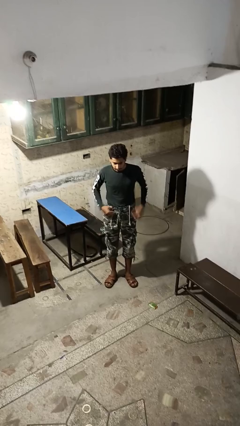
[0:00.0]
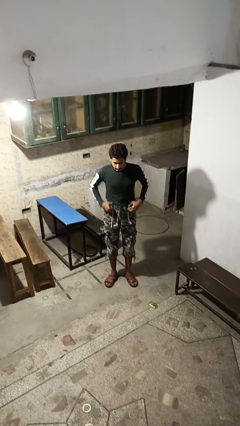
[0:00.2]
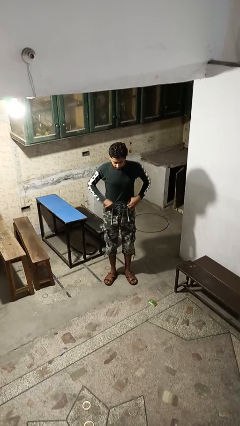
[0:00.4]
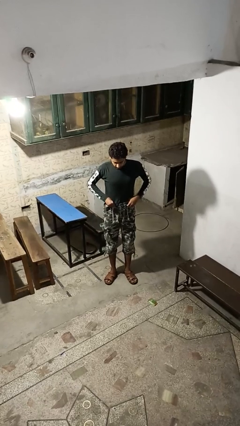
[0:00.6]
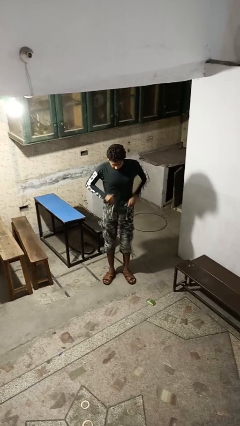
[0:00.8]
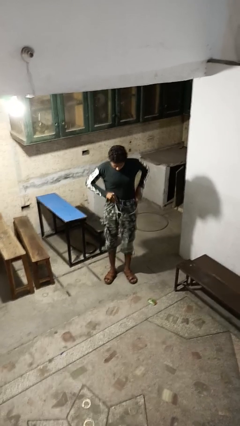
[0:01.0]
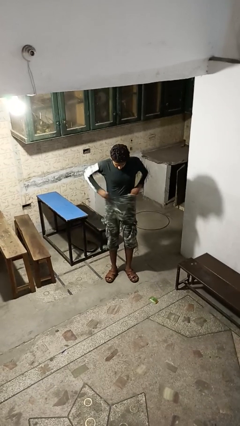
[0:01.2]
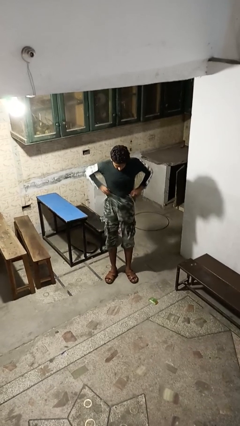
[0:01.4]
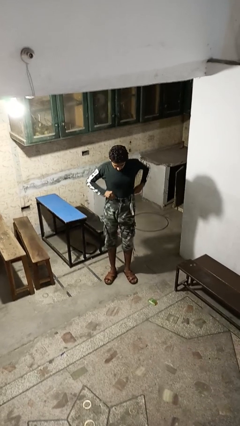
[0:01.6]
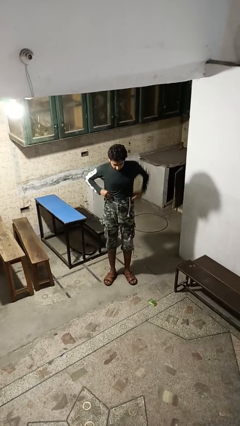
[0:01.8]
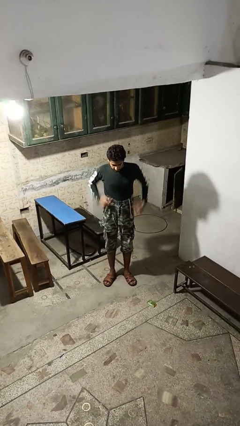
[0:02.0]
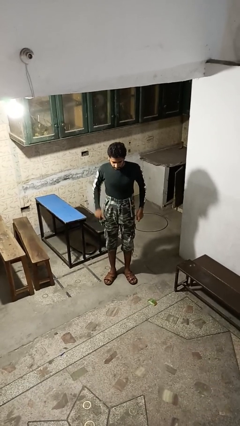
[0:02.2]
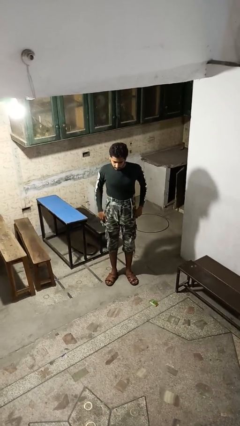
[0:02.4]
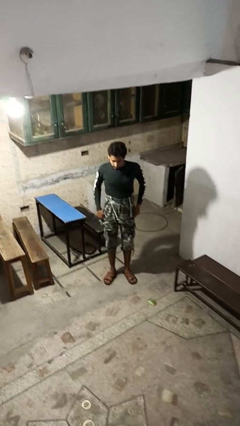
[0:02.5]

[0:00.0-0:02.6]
person hikes up pants

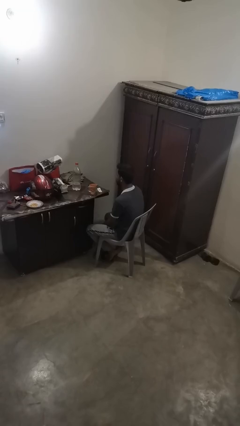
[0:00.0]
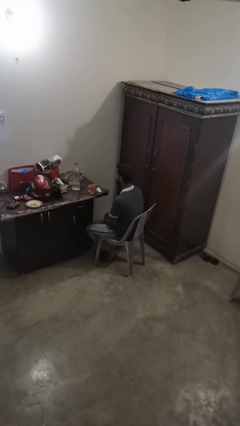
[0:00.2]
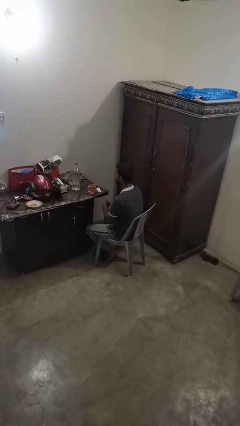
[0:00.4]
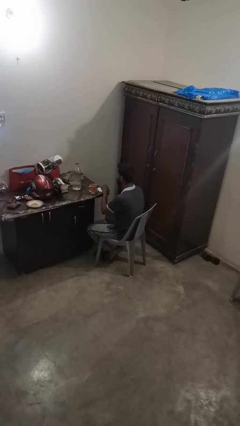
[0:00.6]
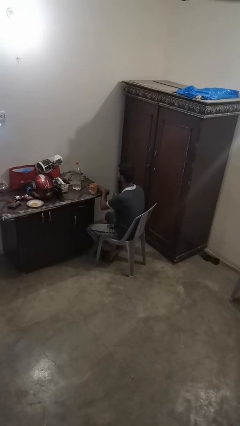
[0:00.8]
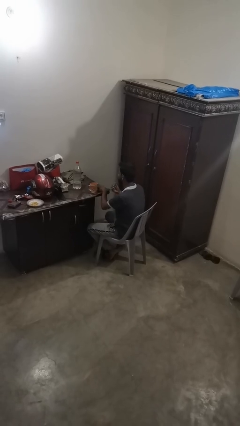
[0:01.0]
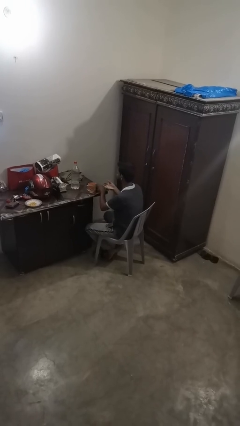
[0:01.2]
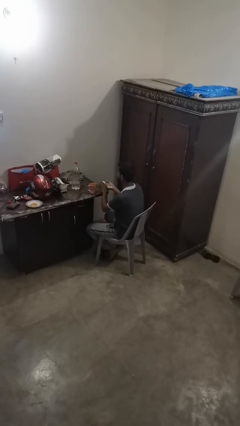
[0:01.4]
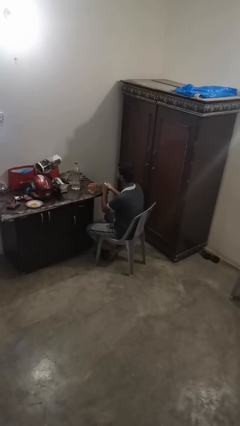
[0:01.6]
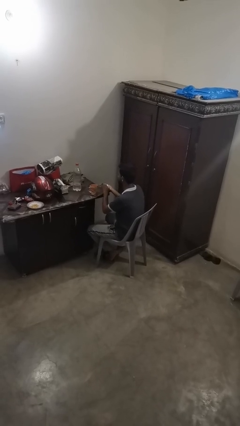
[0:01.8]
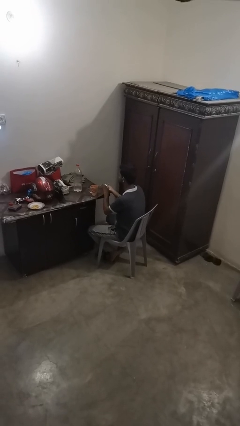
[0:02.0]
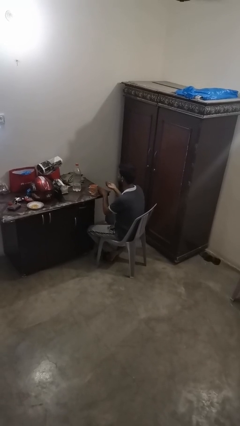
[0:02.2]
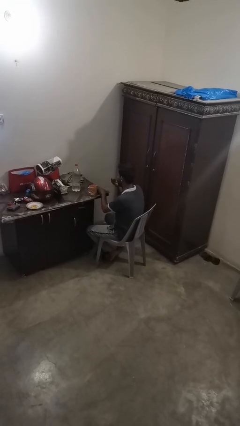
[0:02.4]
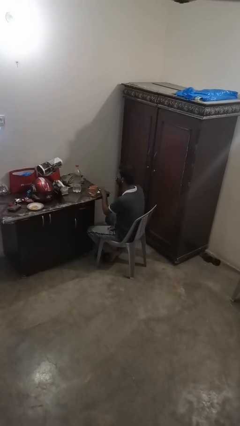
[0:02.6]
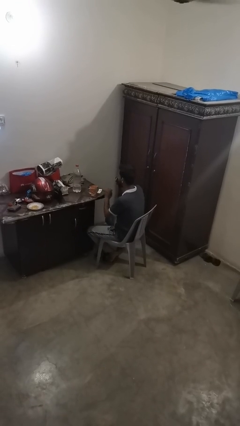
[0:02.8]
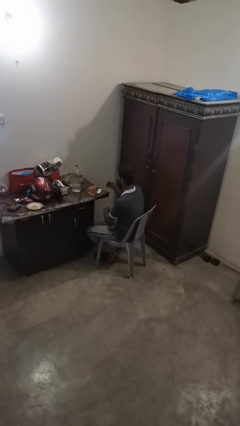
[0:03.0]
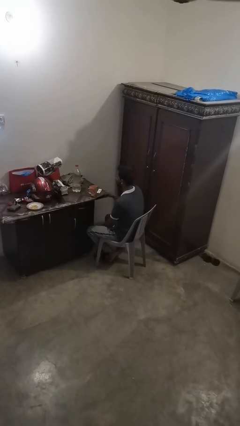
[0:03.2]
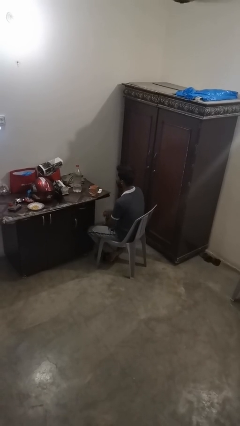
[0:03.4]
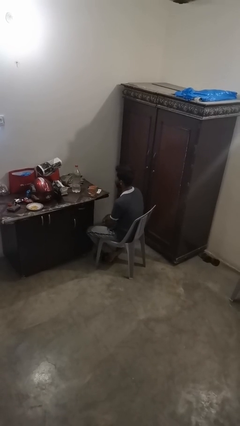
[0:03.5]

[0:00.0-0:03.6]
person takes medicine pills

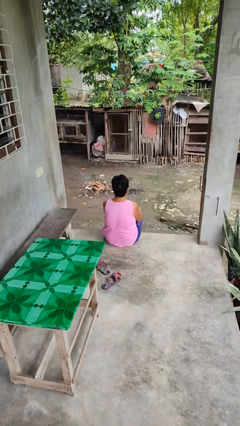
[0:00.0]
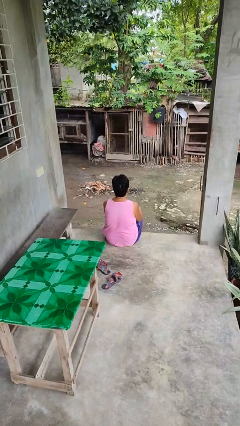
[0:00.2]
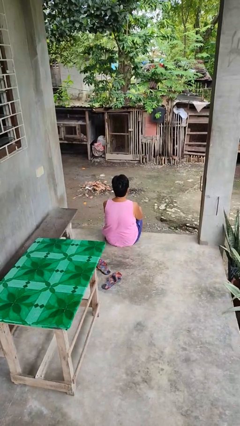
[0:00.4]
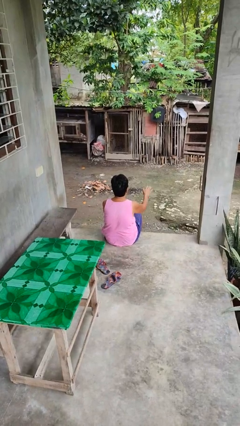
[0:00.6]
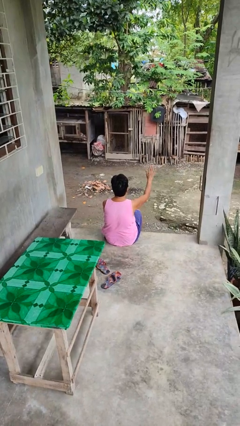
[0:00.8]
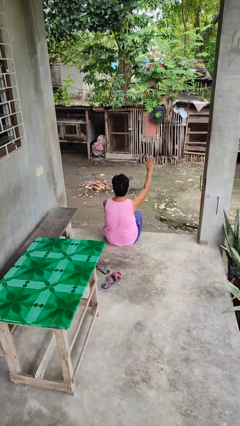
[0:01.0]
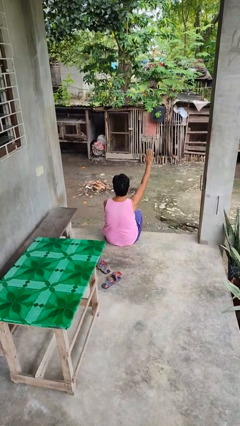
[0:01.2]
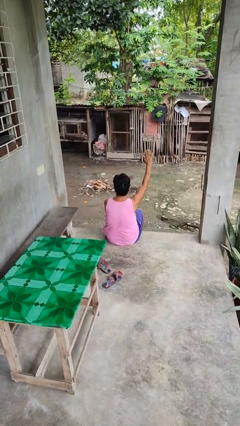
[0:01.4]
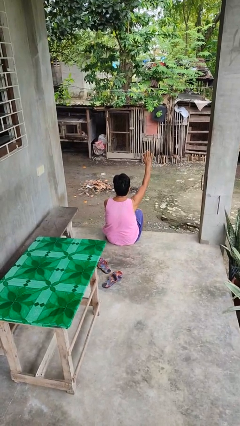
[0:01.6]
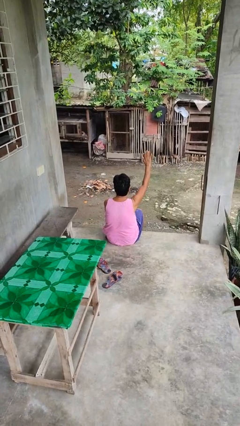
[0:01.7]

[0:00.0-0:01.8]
person gestures raise hand

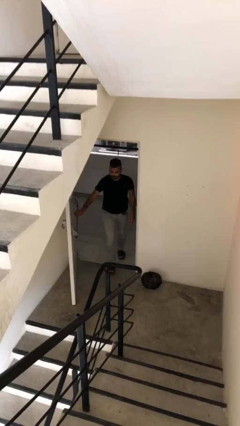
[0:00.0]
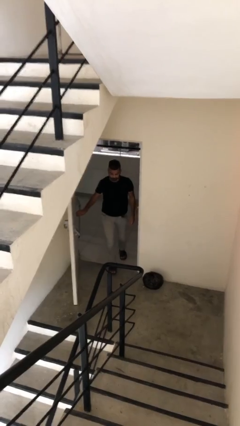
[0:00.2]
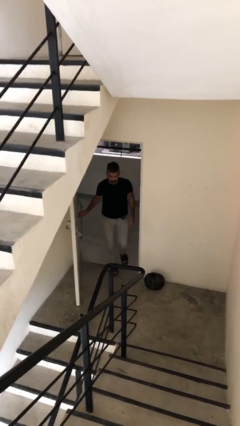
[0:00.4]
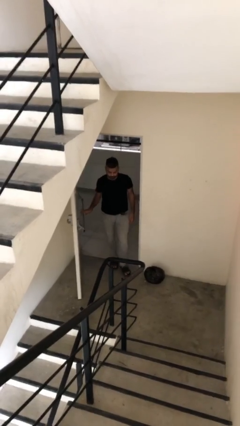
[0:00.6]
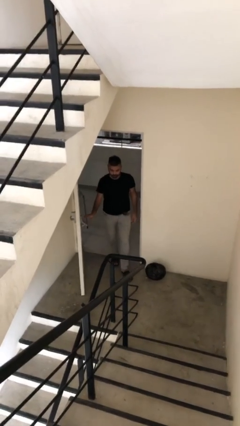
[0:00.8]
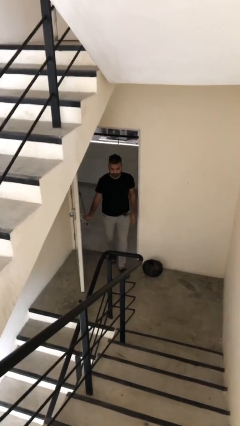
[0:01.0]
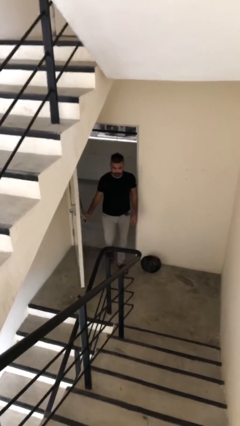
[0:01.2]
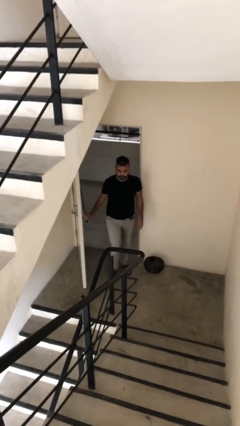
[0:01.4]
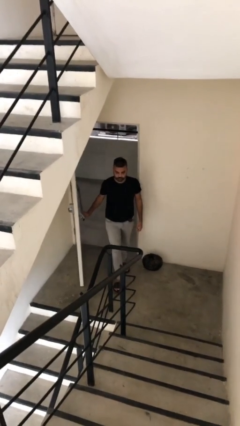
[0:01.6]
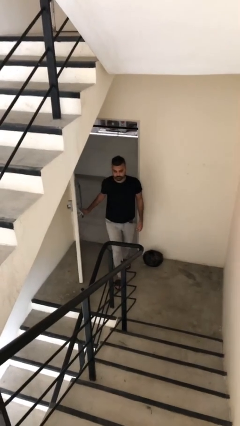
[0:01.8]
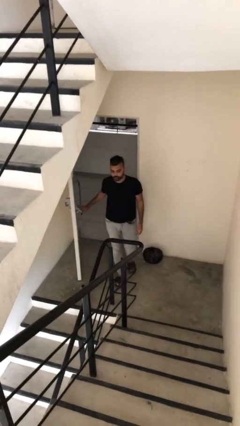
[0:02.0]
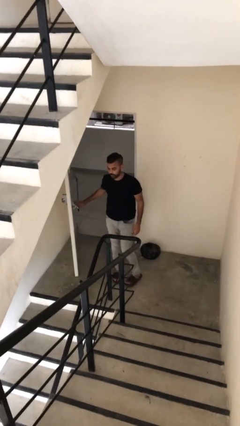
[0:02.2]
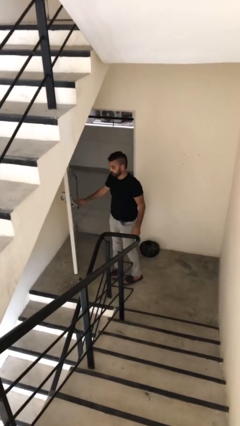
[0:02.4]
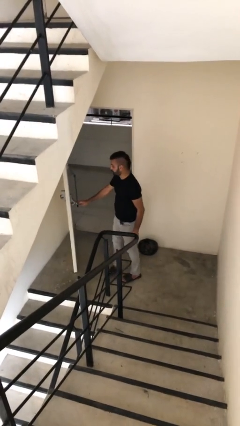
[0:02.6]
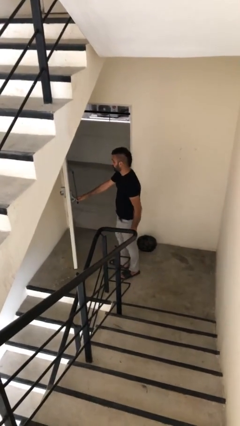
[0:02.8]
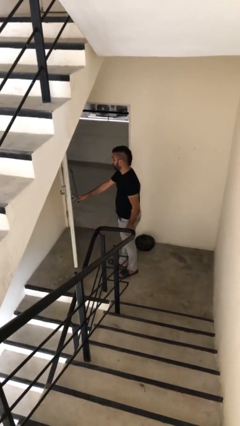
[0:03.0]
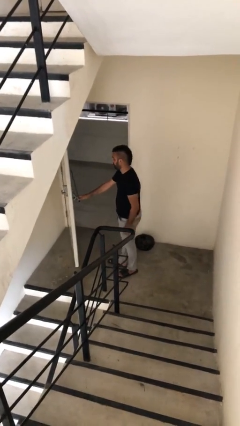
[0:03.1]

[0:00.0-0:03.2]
person enters scene through structure

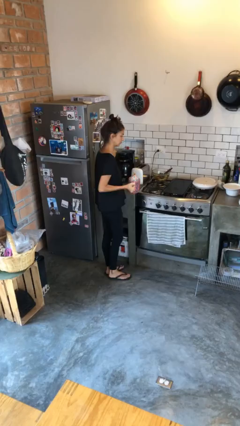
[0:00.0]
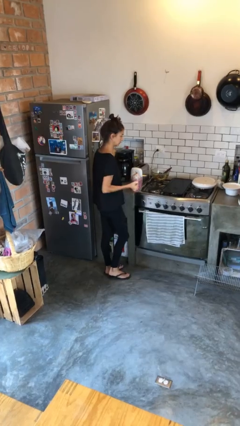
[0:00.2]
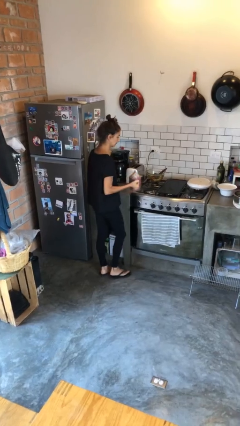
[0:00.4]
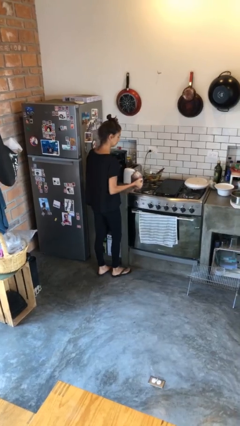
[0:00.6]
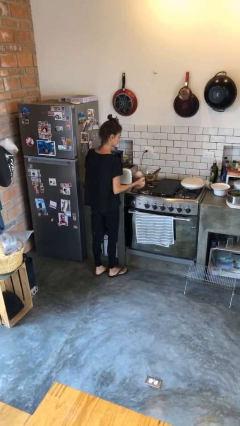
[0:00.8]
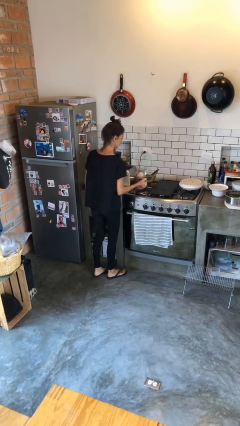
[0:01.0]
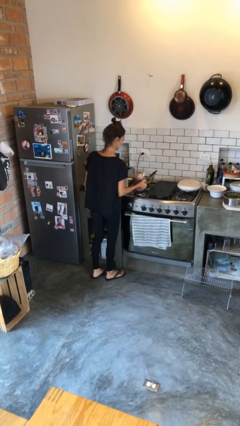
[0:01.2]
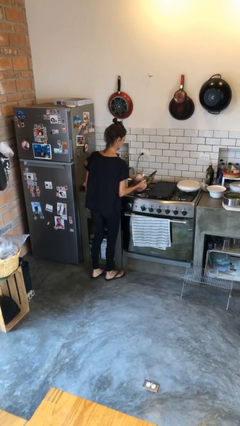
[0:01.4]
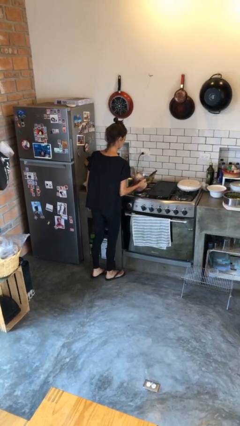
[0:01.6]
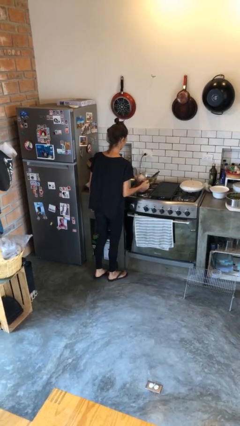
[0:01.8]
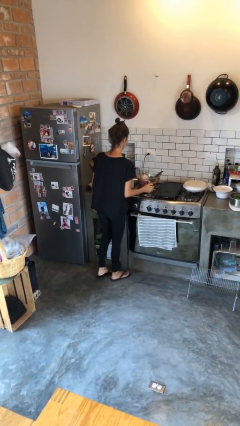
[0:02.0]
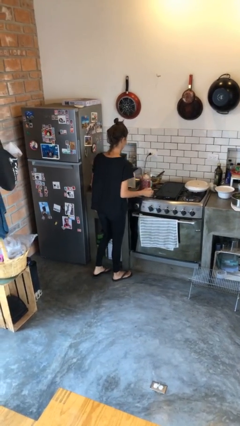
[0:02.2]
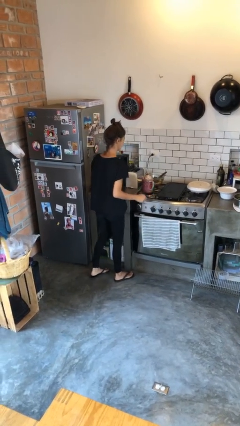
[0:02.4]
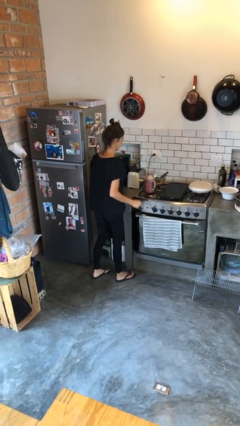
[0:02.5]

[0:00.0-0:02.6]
person puts down object on countertop

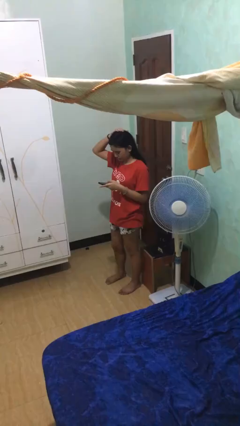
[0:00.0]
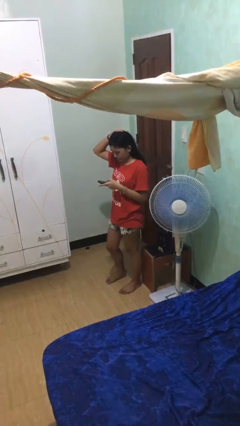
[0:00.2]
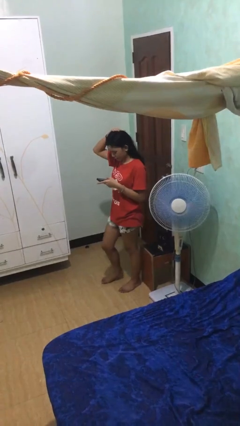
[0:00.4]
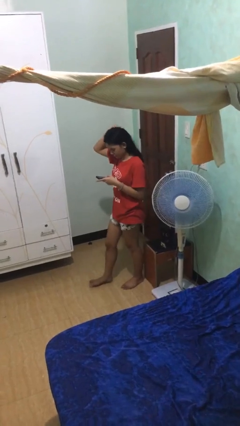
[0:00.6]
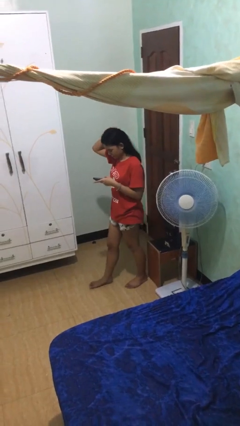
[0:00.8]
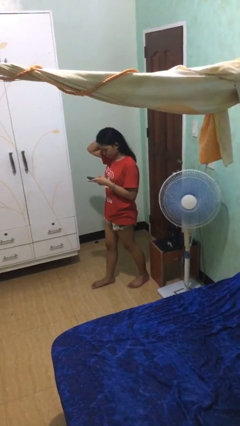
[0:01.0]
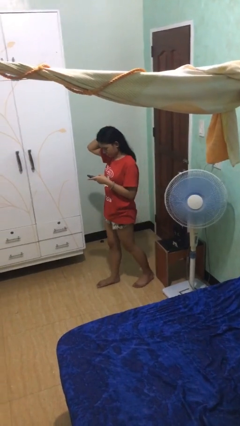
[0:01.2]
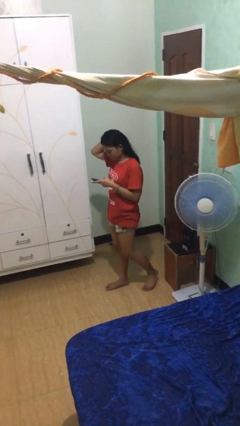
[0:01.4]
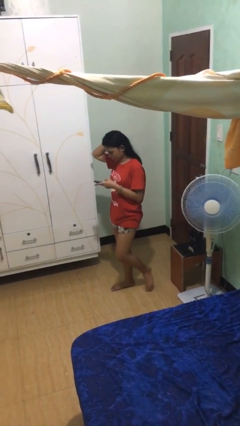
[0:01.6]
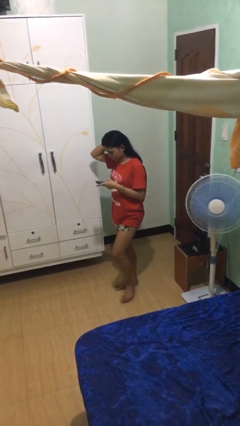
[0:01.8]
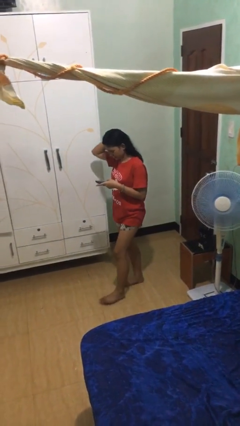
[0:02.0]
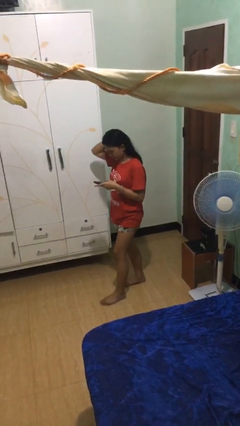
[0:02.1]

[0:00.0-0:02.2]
person texts on phone

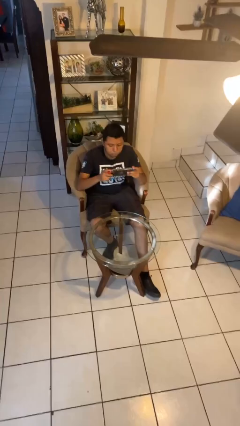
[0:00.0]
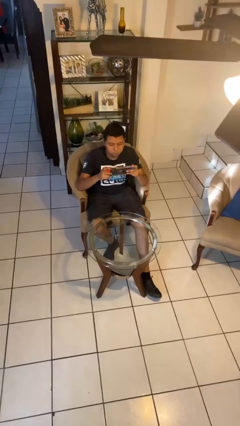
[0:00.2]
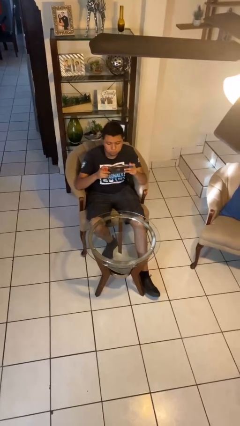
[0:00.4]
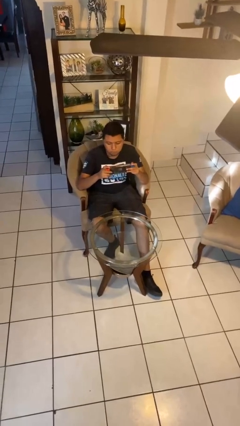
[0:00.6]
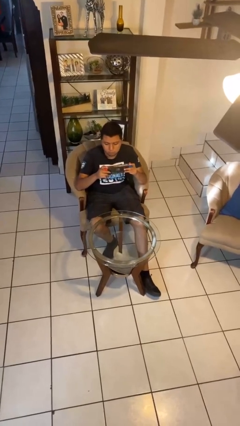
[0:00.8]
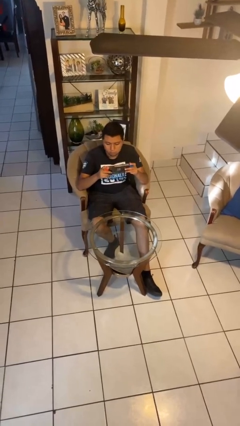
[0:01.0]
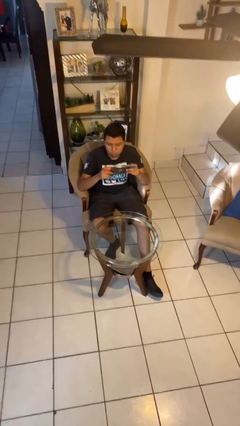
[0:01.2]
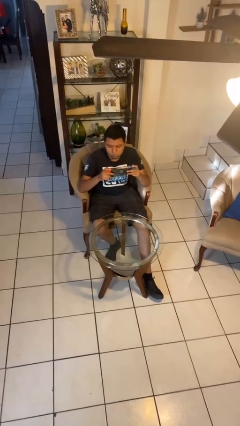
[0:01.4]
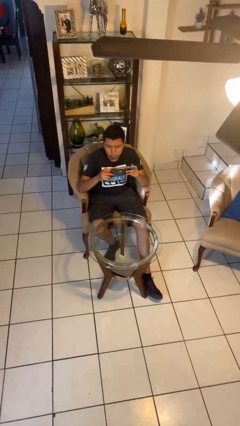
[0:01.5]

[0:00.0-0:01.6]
person interacts with handheld game
